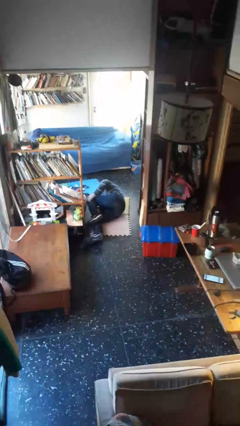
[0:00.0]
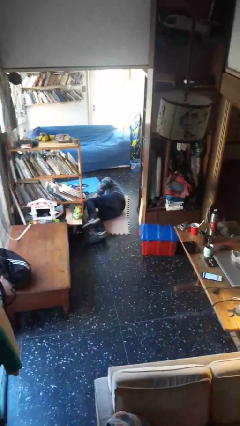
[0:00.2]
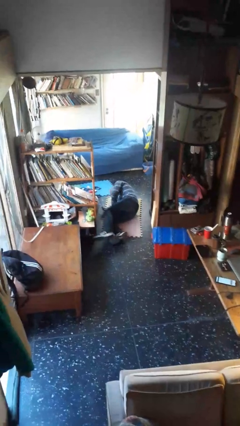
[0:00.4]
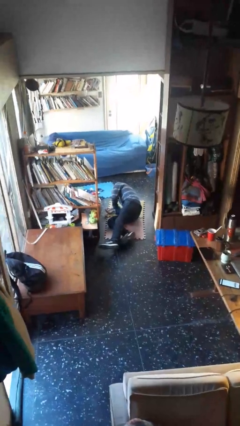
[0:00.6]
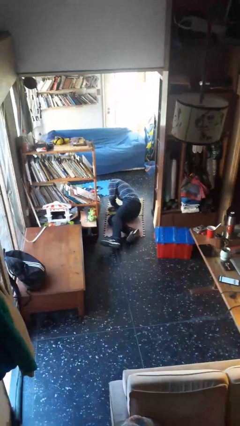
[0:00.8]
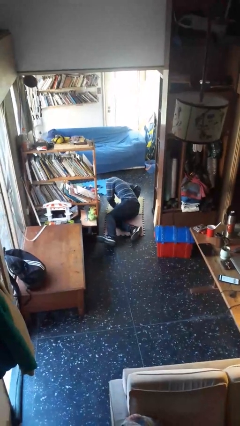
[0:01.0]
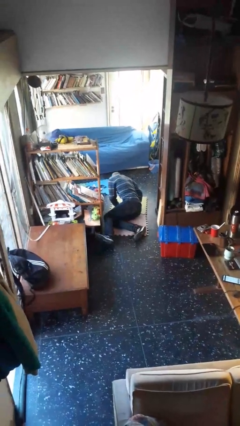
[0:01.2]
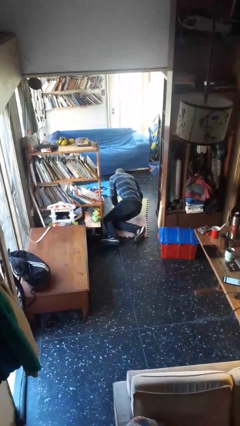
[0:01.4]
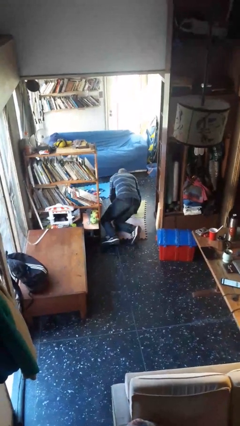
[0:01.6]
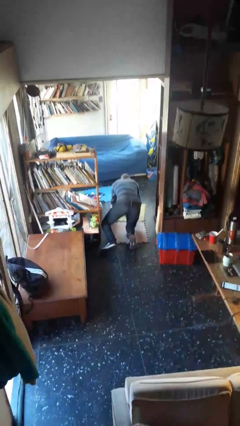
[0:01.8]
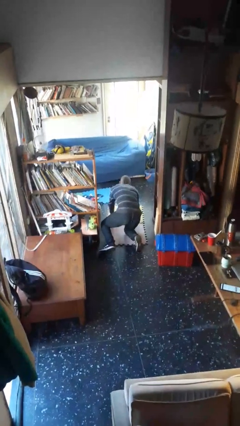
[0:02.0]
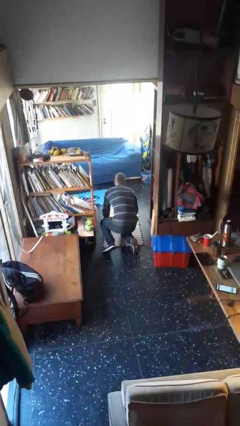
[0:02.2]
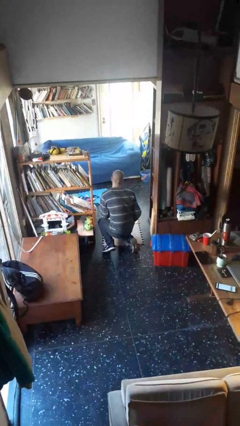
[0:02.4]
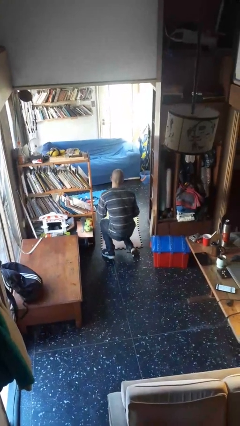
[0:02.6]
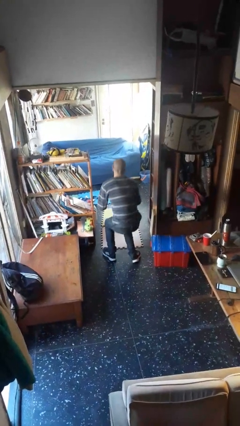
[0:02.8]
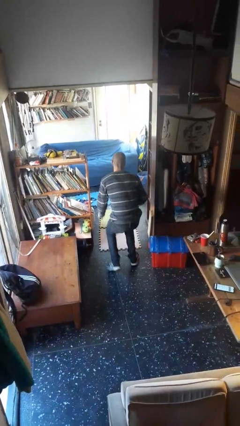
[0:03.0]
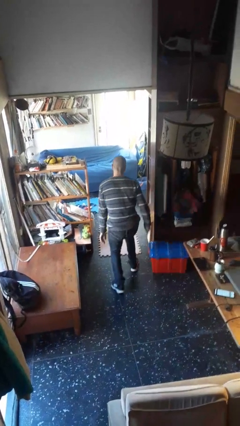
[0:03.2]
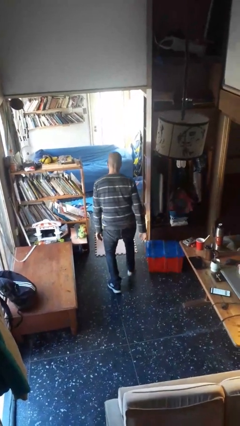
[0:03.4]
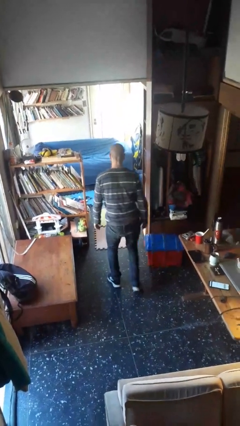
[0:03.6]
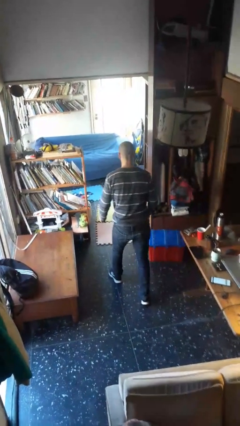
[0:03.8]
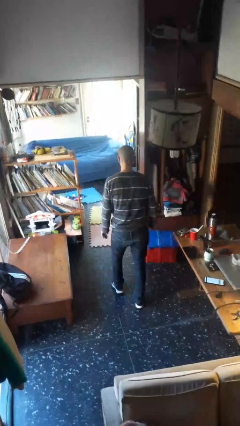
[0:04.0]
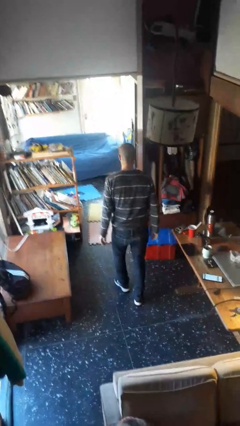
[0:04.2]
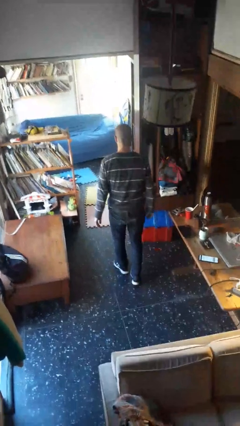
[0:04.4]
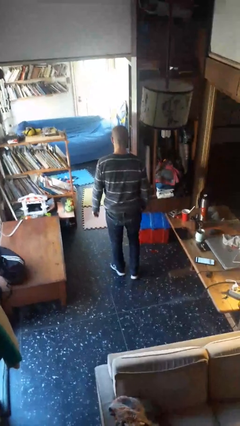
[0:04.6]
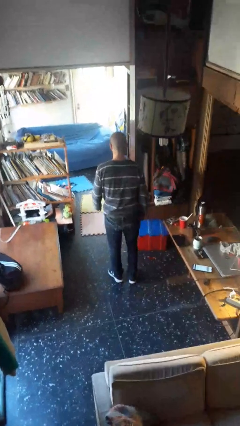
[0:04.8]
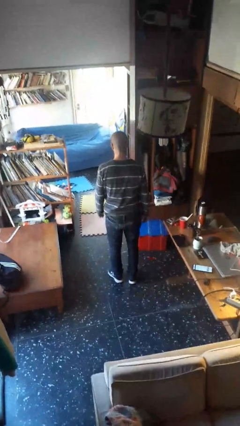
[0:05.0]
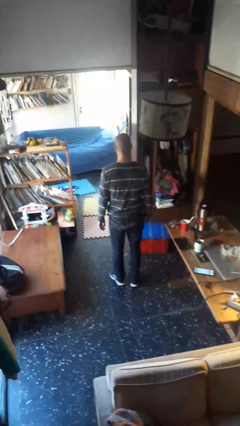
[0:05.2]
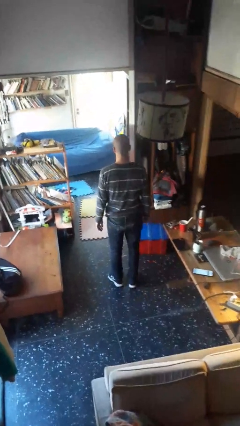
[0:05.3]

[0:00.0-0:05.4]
person stands up from floor

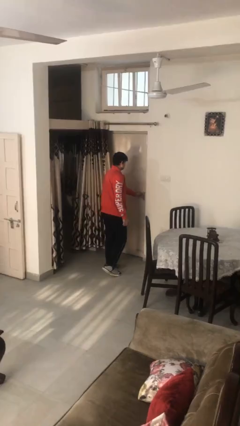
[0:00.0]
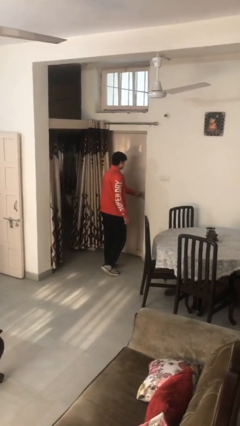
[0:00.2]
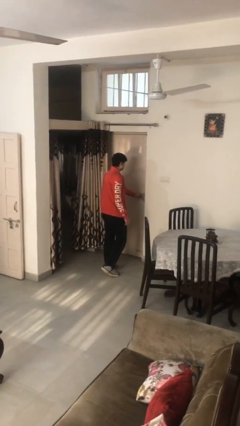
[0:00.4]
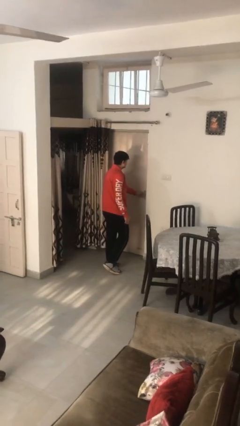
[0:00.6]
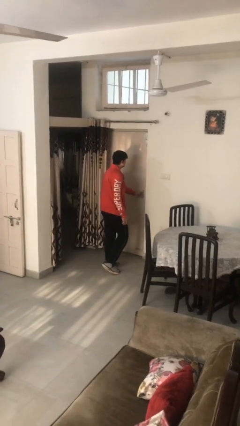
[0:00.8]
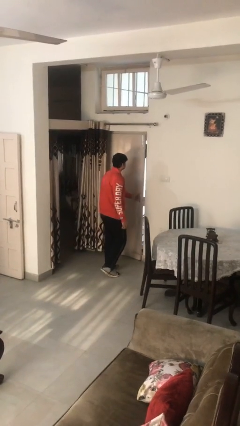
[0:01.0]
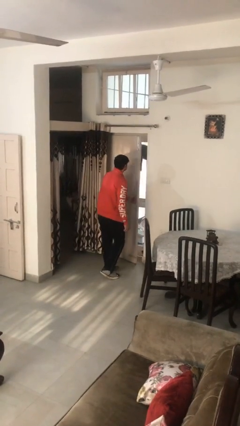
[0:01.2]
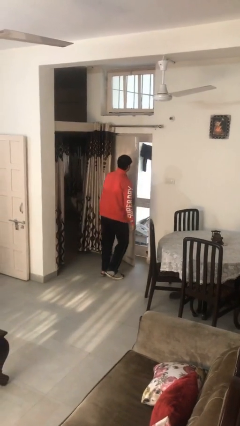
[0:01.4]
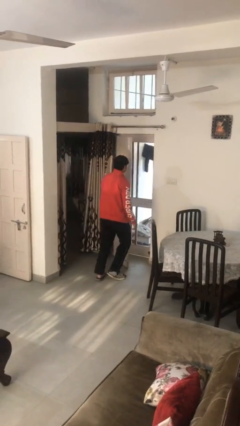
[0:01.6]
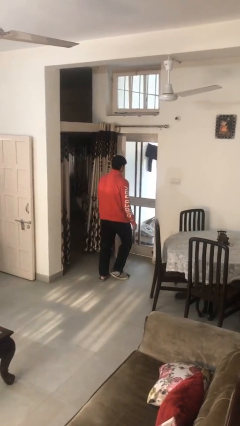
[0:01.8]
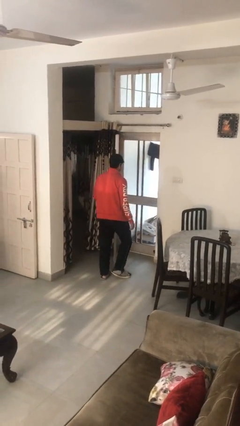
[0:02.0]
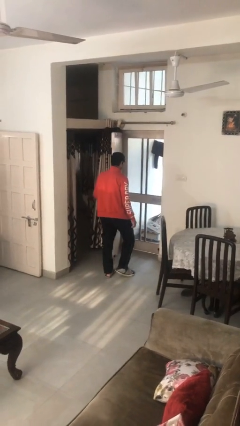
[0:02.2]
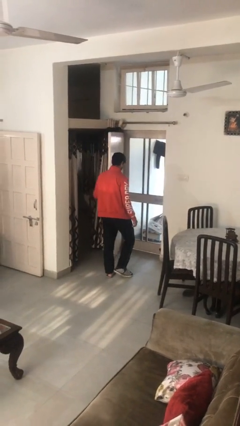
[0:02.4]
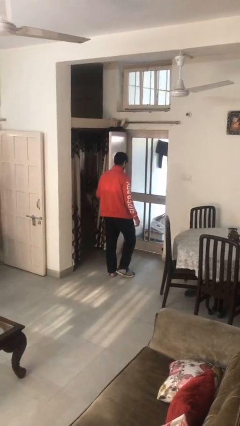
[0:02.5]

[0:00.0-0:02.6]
person opens facility door

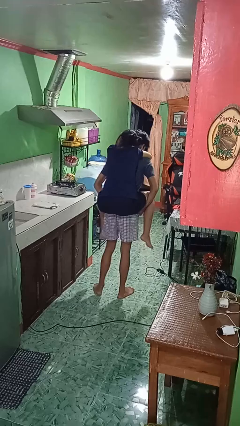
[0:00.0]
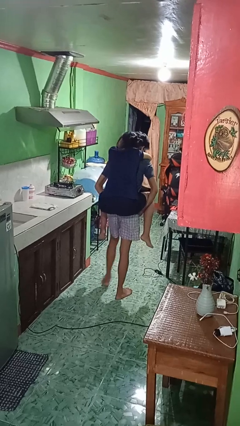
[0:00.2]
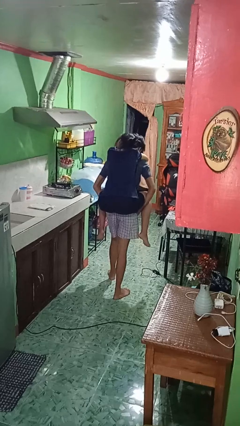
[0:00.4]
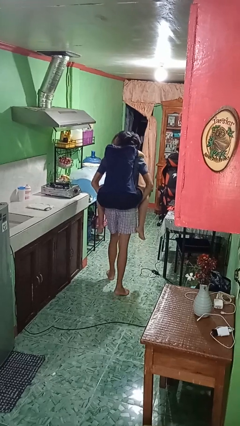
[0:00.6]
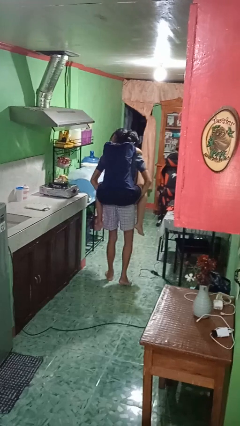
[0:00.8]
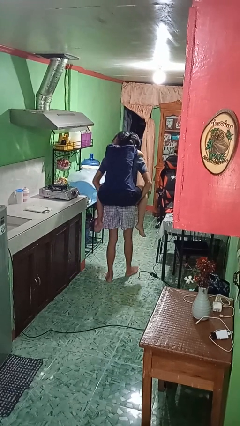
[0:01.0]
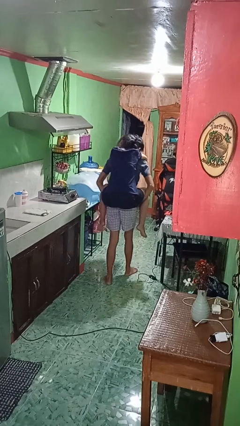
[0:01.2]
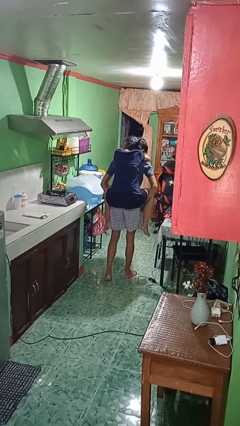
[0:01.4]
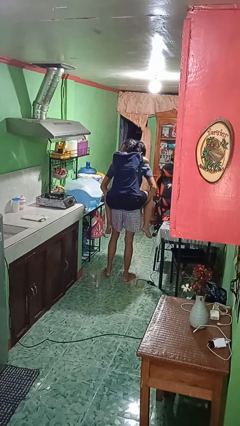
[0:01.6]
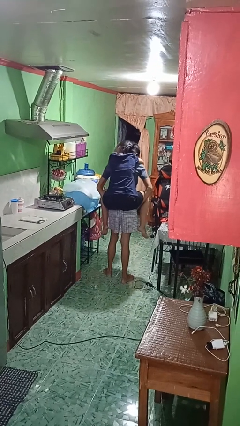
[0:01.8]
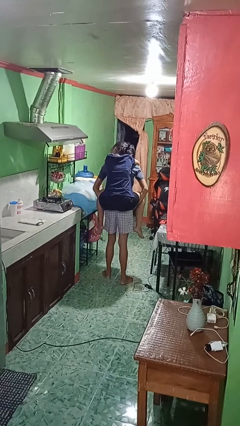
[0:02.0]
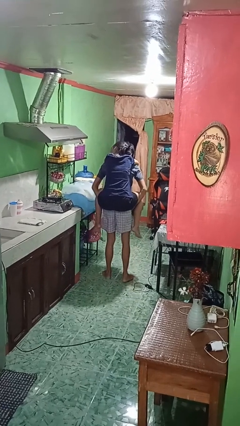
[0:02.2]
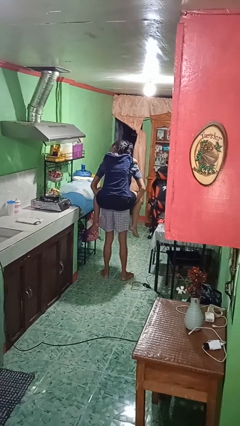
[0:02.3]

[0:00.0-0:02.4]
person carries person on back

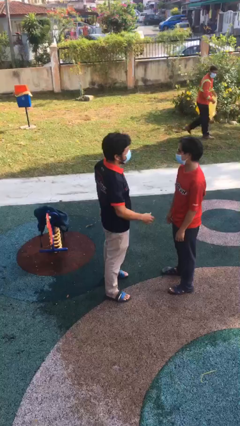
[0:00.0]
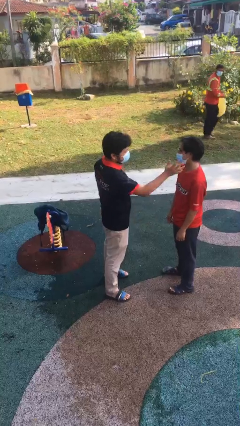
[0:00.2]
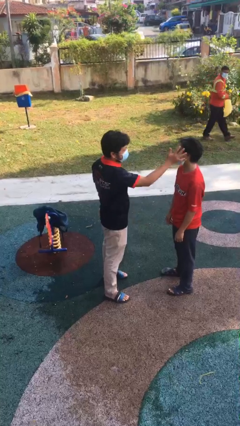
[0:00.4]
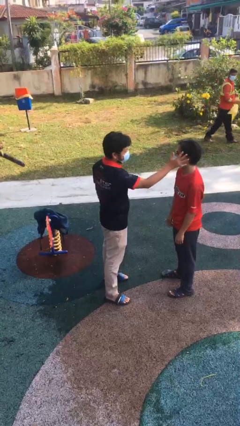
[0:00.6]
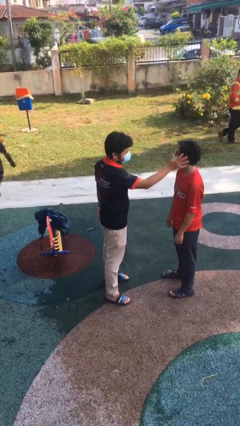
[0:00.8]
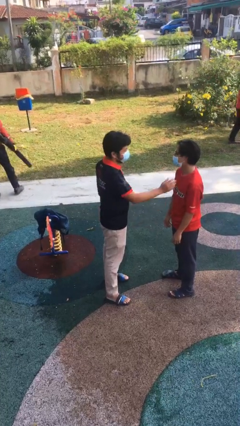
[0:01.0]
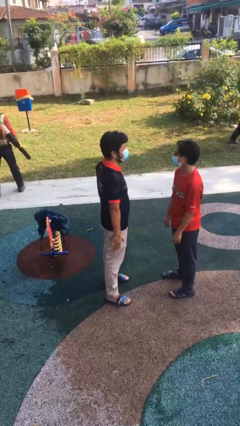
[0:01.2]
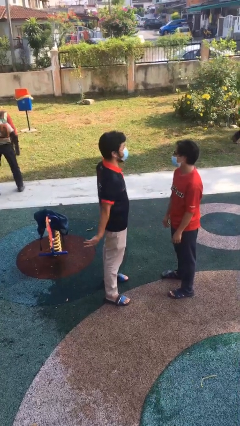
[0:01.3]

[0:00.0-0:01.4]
person touches face of person

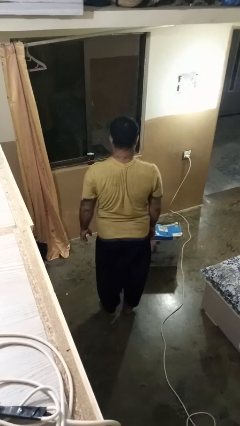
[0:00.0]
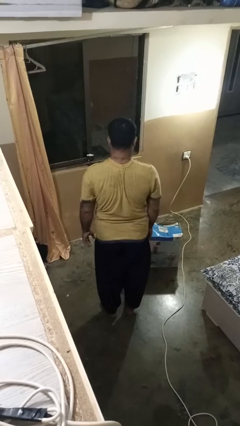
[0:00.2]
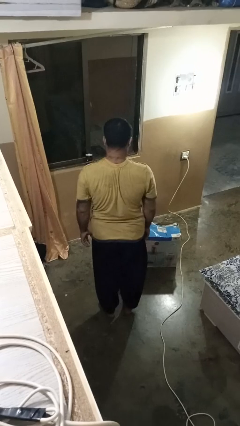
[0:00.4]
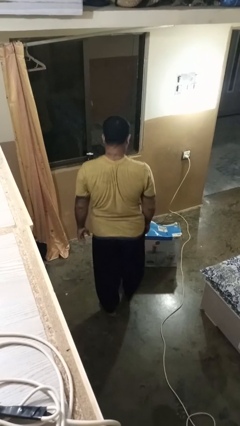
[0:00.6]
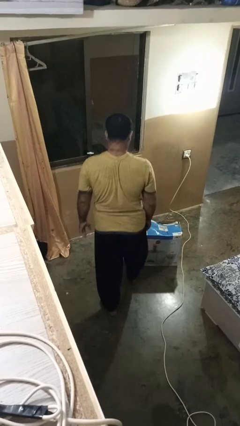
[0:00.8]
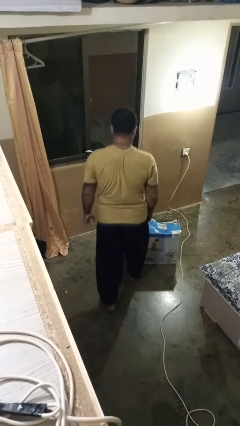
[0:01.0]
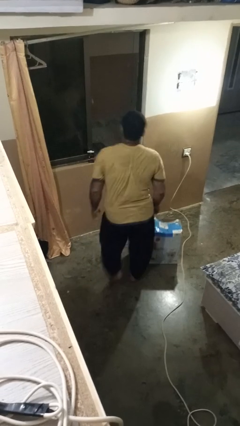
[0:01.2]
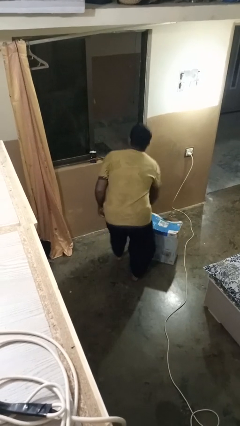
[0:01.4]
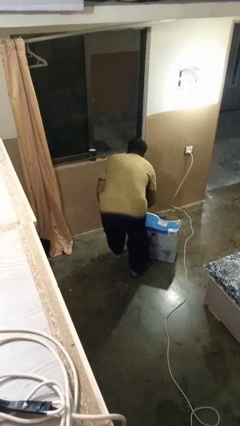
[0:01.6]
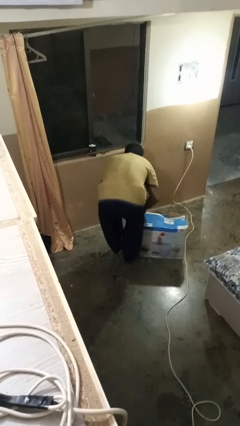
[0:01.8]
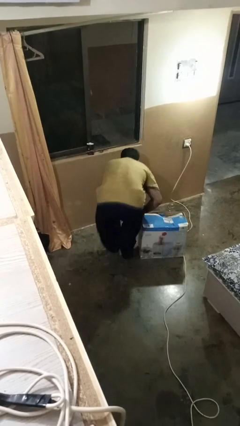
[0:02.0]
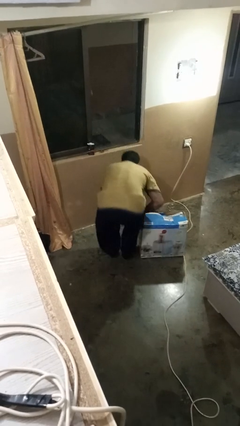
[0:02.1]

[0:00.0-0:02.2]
person trips on object on floor

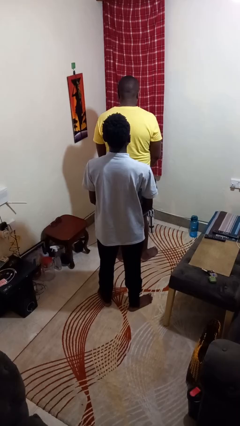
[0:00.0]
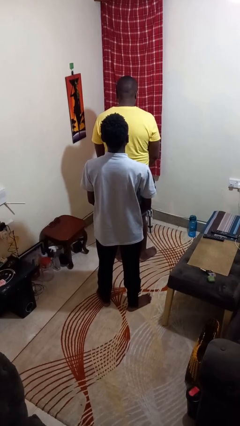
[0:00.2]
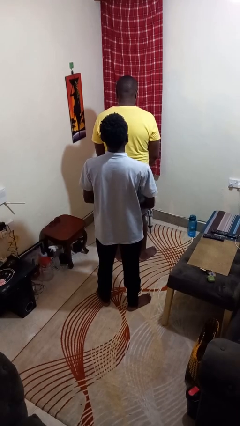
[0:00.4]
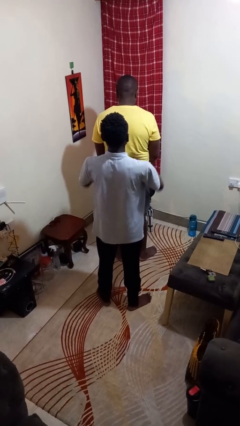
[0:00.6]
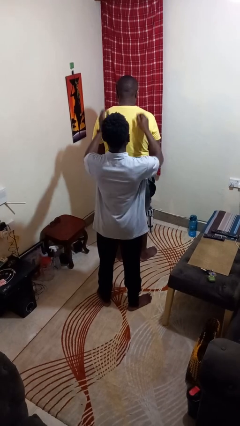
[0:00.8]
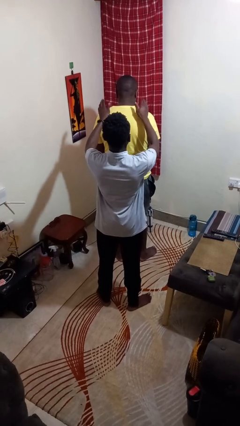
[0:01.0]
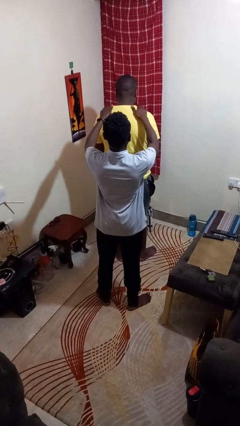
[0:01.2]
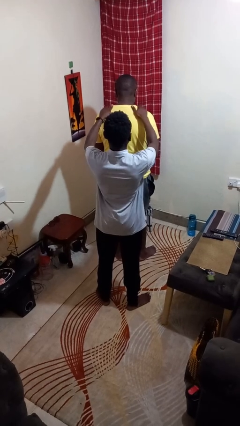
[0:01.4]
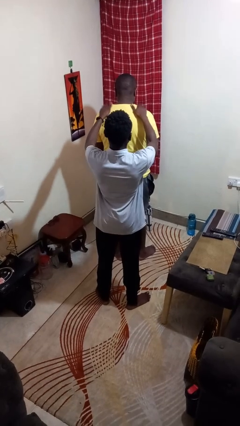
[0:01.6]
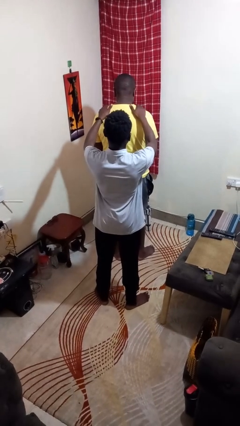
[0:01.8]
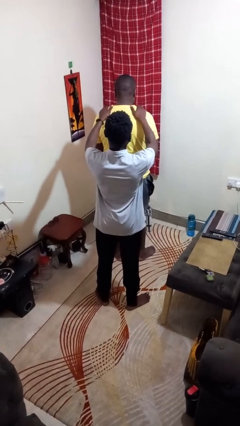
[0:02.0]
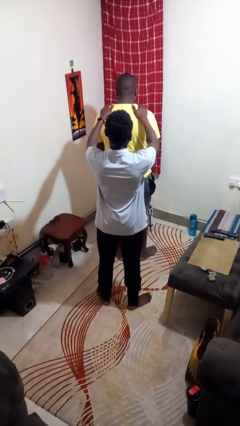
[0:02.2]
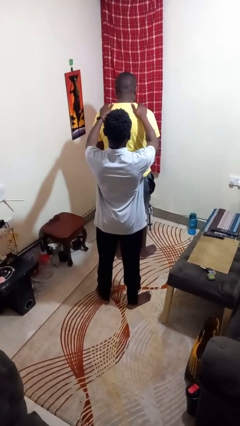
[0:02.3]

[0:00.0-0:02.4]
person pounds shoulders of person

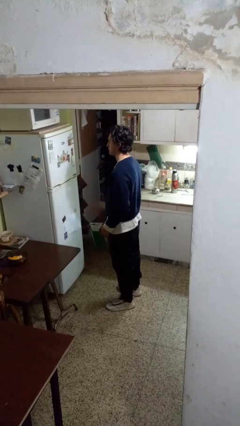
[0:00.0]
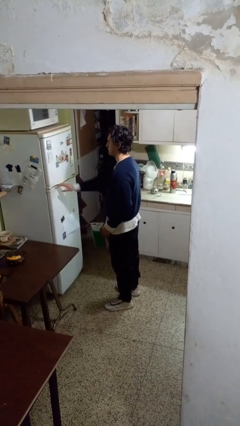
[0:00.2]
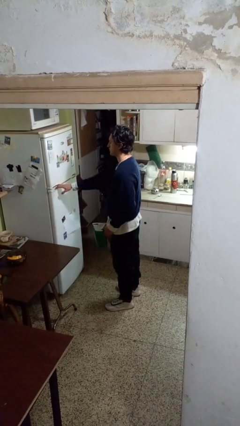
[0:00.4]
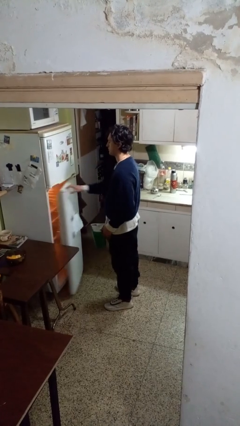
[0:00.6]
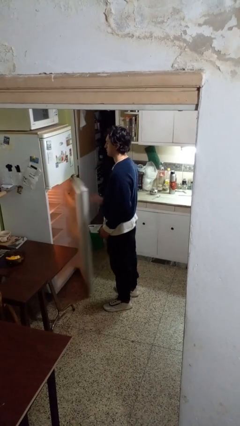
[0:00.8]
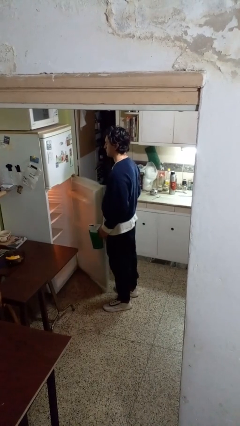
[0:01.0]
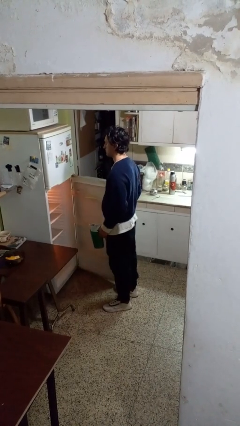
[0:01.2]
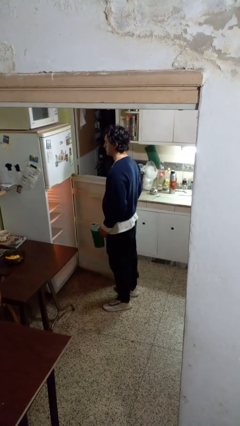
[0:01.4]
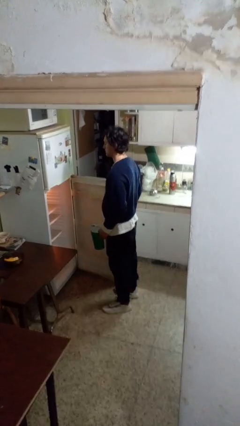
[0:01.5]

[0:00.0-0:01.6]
person opens refrigerator
